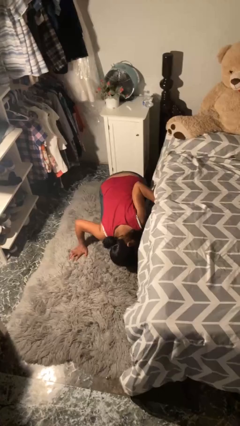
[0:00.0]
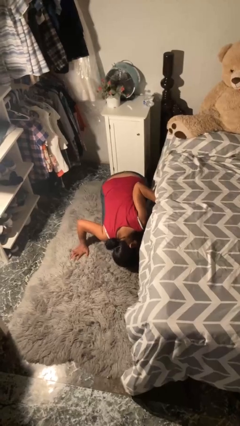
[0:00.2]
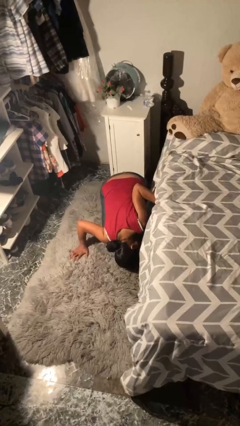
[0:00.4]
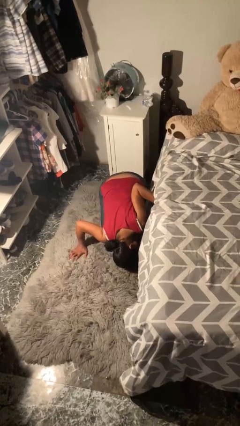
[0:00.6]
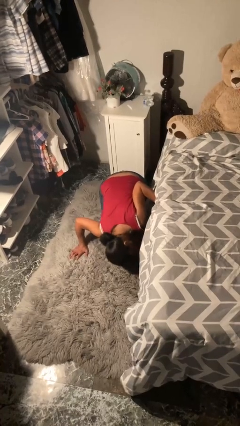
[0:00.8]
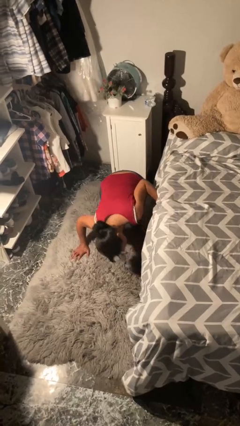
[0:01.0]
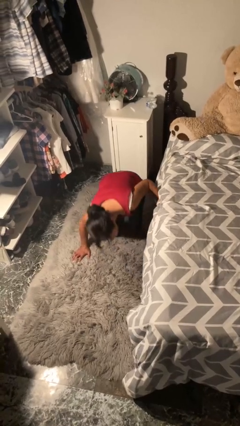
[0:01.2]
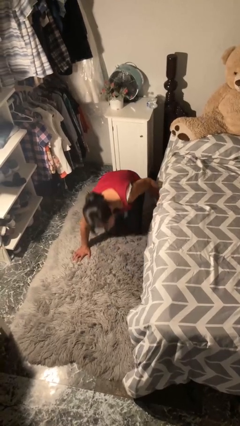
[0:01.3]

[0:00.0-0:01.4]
person searches under bed

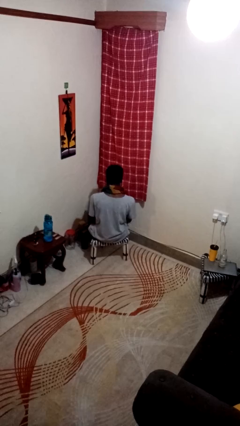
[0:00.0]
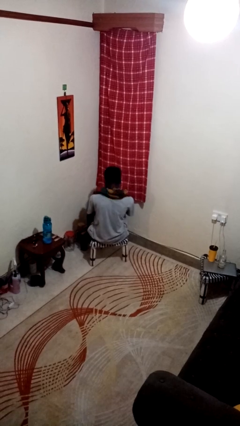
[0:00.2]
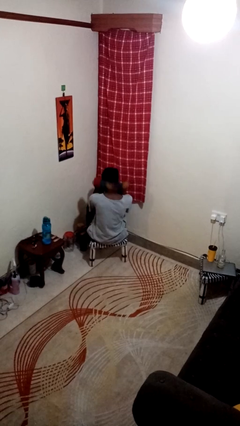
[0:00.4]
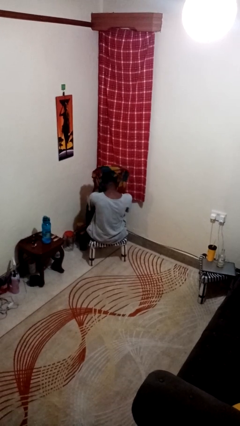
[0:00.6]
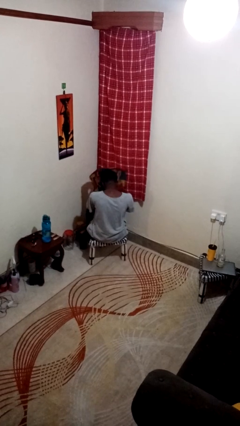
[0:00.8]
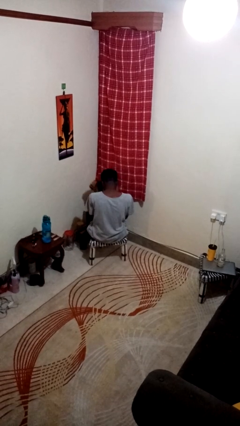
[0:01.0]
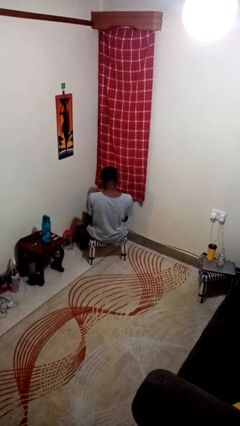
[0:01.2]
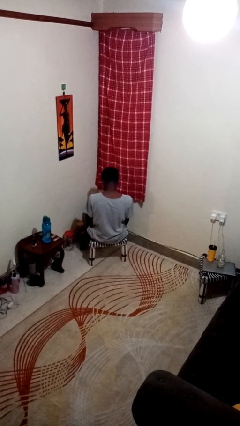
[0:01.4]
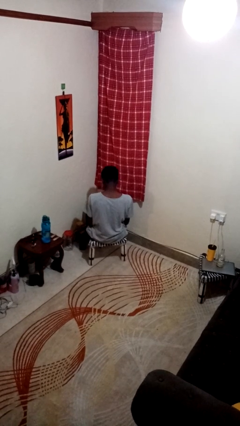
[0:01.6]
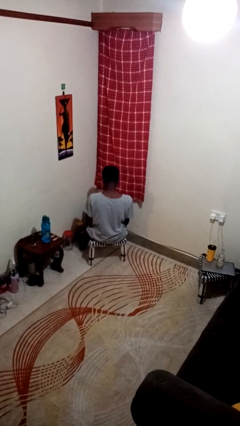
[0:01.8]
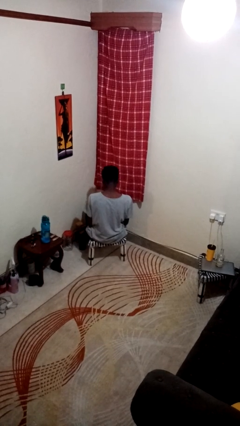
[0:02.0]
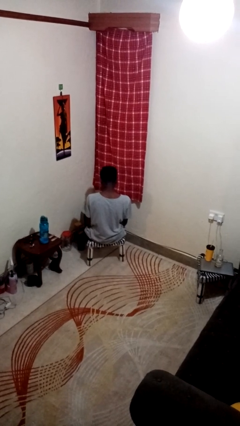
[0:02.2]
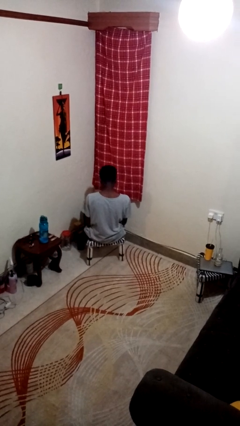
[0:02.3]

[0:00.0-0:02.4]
person takes off scarf

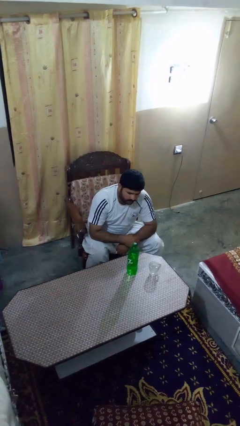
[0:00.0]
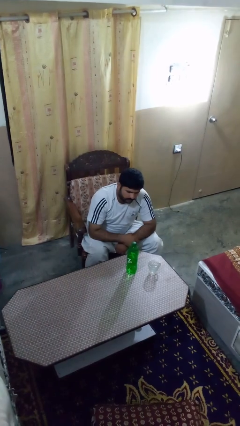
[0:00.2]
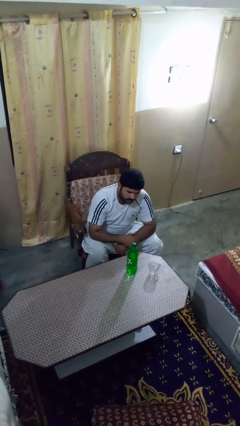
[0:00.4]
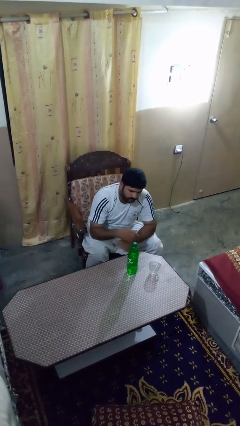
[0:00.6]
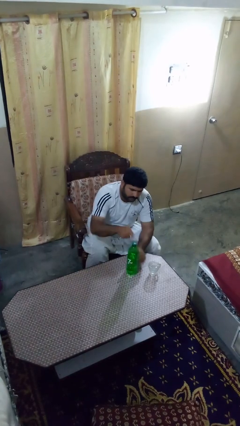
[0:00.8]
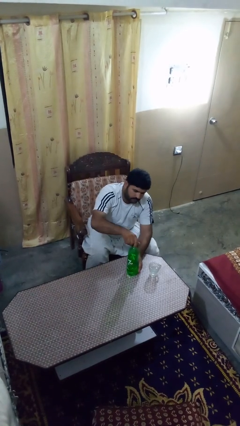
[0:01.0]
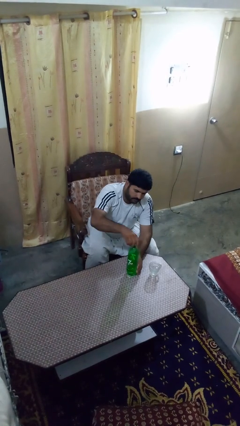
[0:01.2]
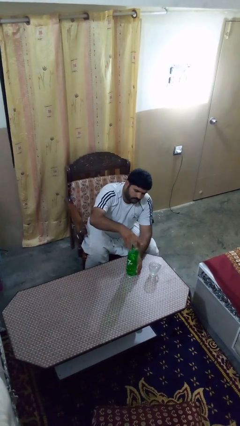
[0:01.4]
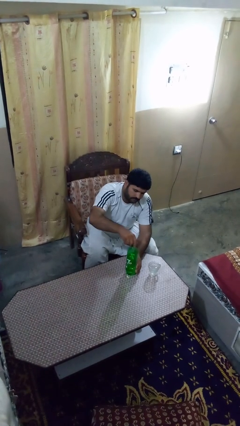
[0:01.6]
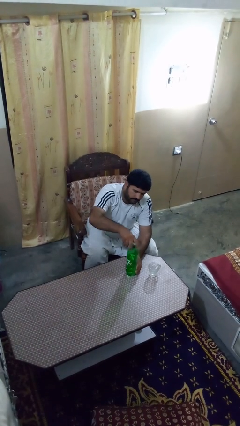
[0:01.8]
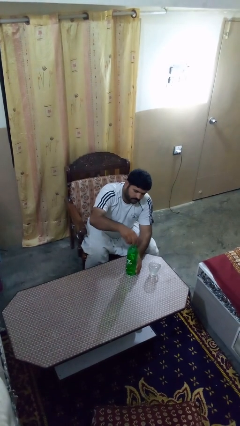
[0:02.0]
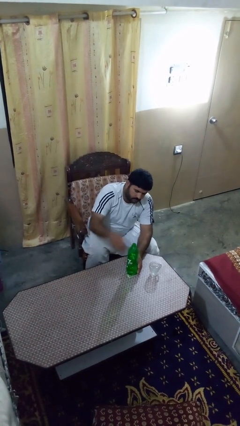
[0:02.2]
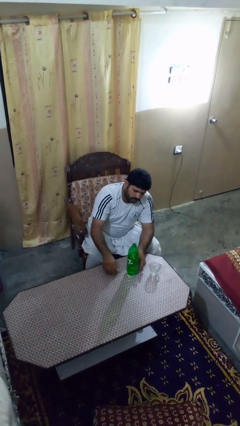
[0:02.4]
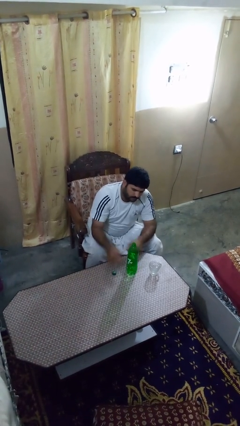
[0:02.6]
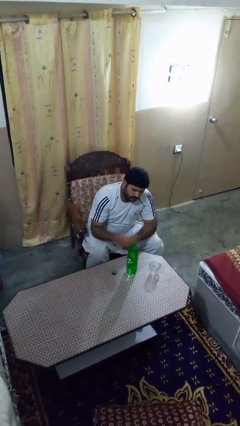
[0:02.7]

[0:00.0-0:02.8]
person unscrews lid from bottle

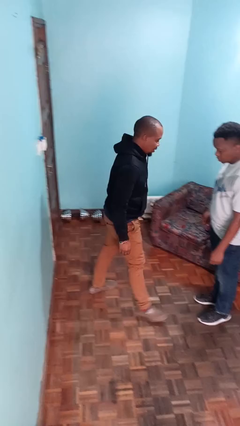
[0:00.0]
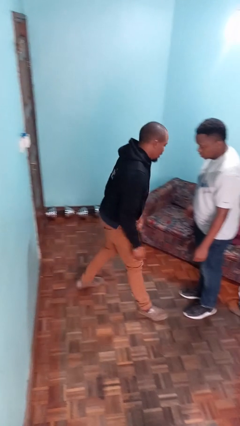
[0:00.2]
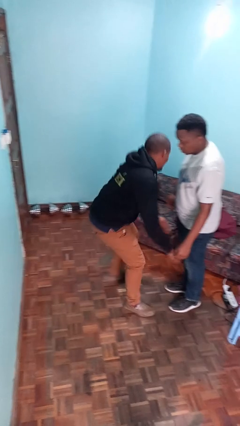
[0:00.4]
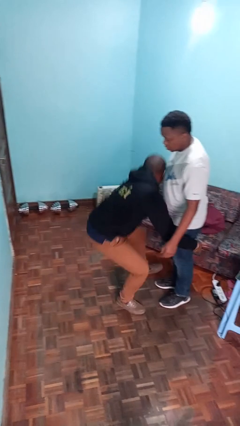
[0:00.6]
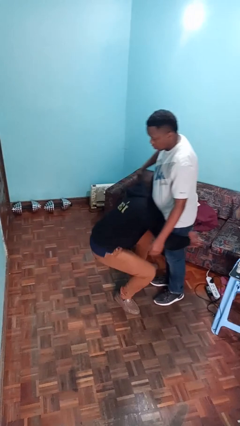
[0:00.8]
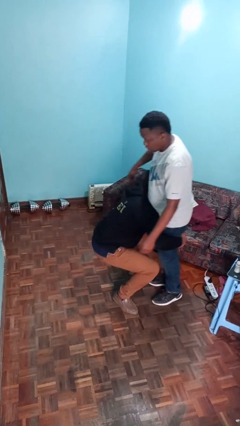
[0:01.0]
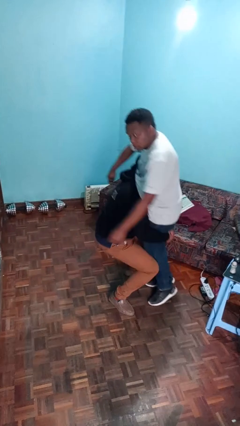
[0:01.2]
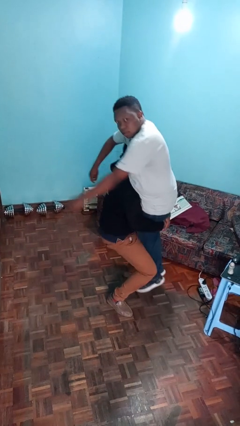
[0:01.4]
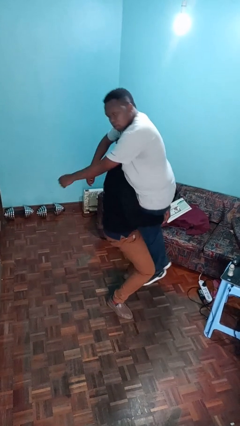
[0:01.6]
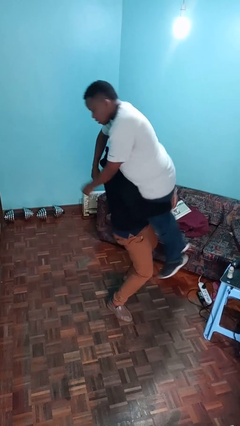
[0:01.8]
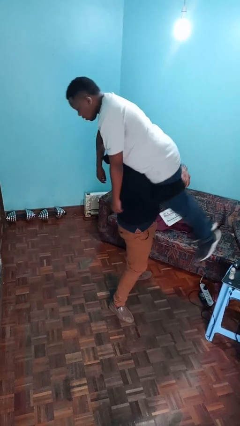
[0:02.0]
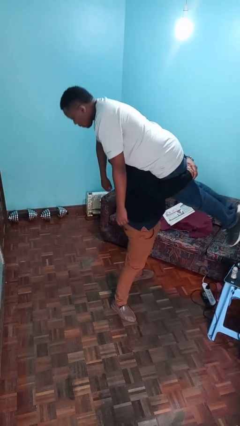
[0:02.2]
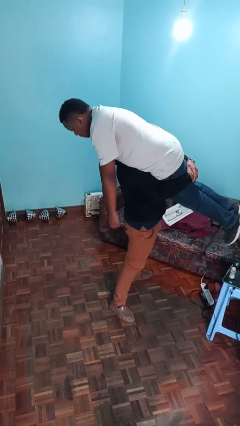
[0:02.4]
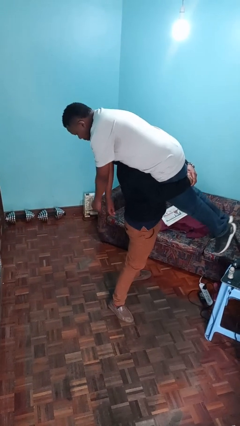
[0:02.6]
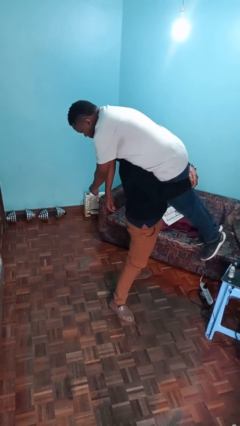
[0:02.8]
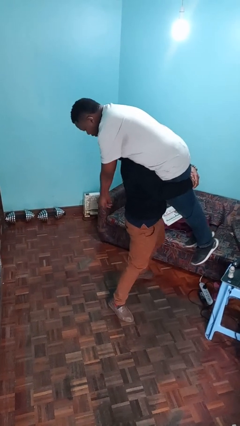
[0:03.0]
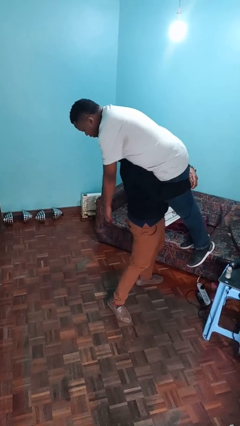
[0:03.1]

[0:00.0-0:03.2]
person carries person over shoulder

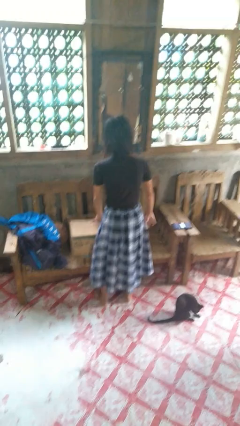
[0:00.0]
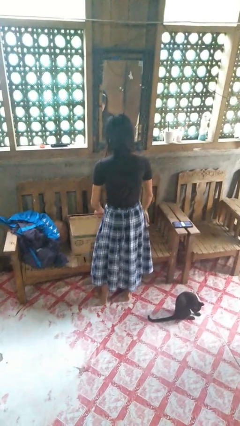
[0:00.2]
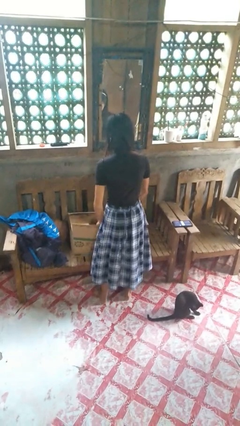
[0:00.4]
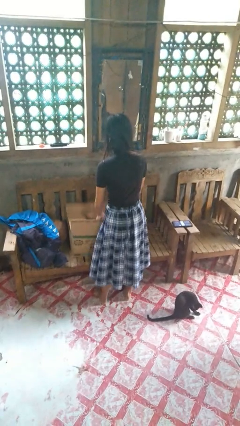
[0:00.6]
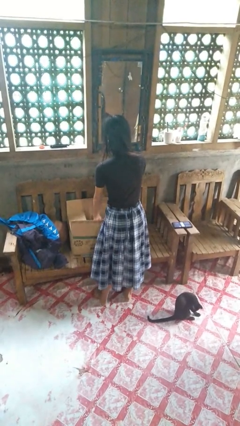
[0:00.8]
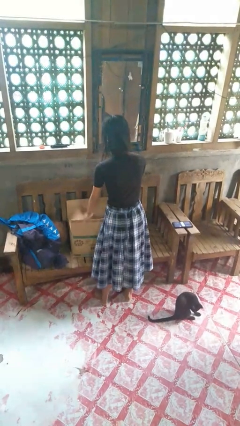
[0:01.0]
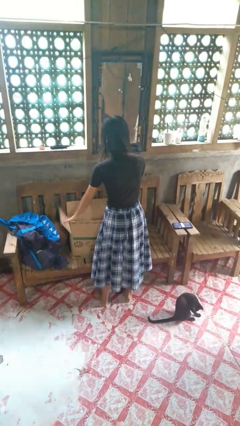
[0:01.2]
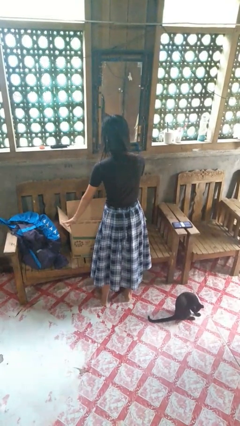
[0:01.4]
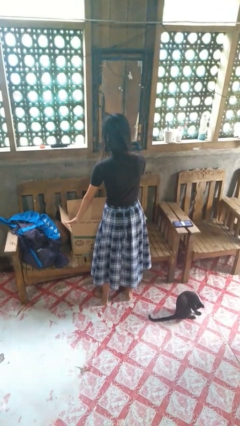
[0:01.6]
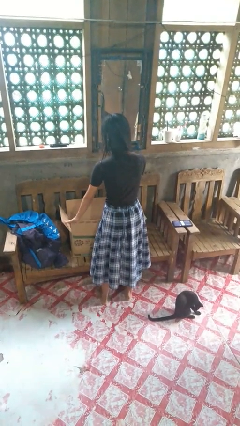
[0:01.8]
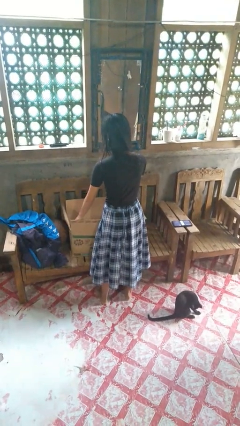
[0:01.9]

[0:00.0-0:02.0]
person opens box

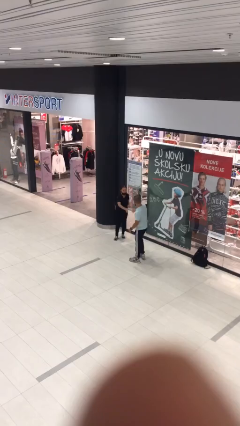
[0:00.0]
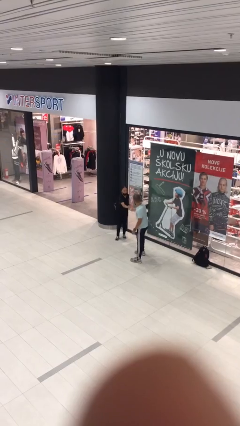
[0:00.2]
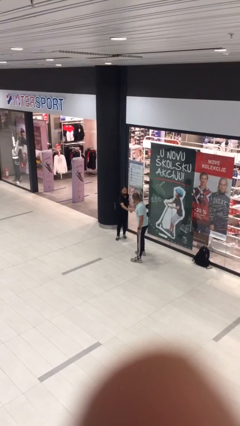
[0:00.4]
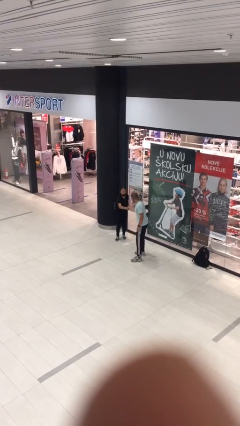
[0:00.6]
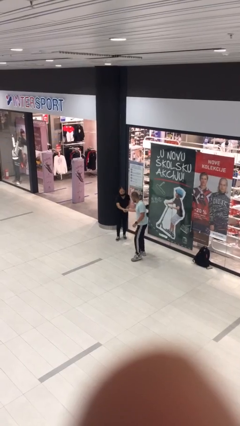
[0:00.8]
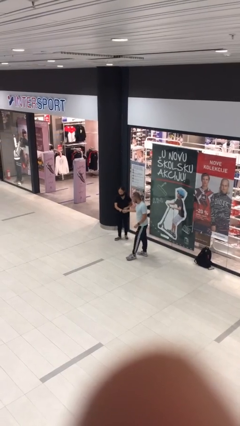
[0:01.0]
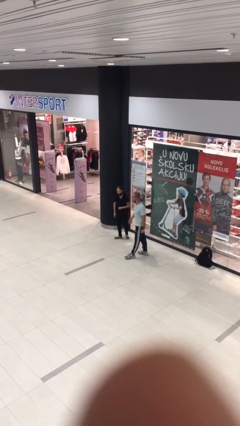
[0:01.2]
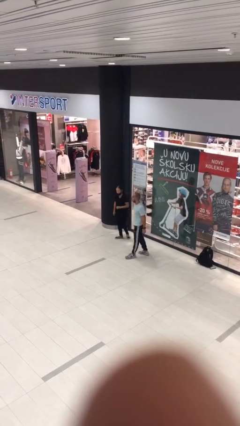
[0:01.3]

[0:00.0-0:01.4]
person shakes hand

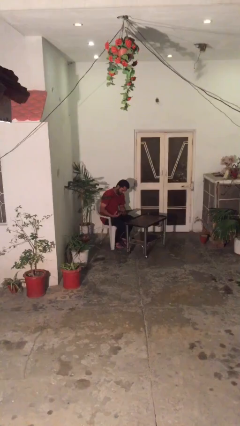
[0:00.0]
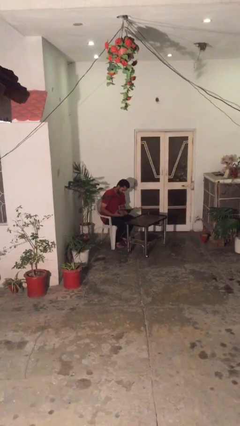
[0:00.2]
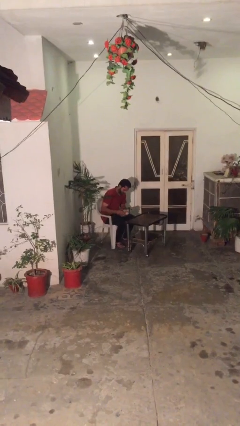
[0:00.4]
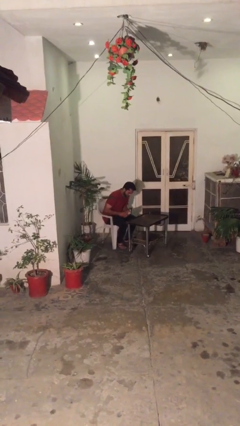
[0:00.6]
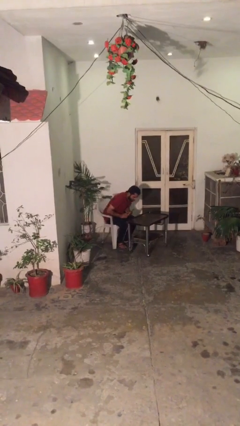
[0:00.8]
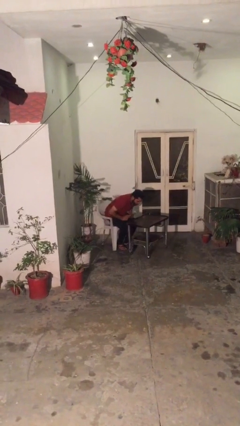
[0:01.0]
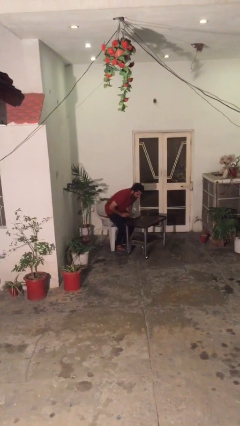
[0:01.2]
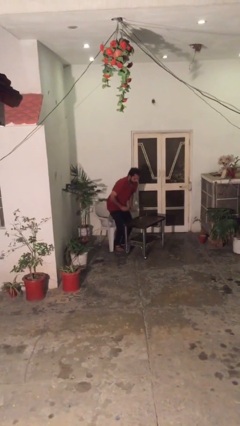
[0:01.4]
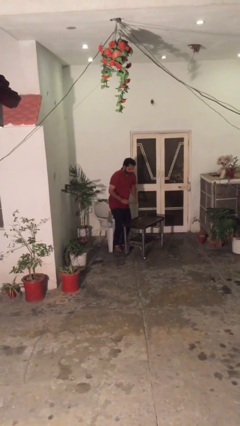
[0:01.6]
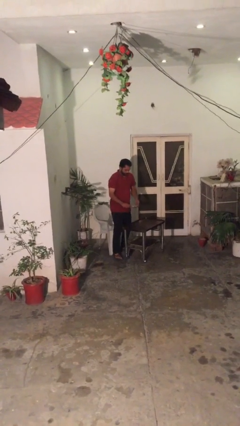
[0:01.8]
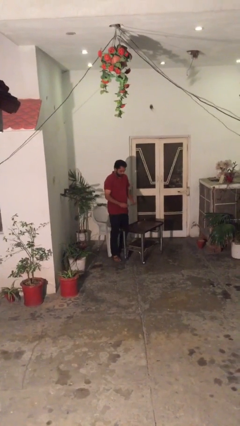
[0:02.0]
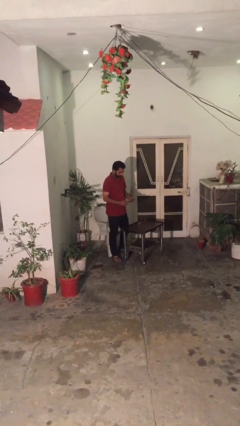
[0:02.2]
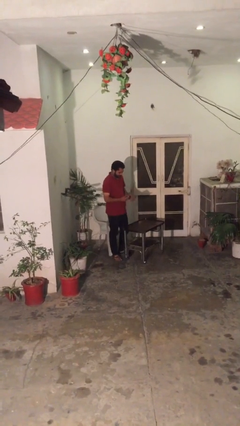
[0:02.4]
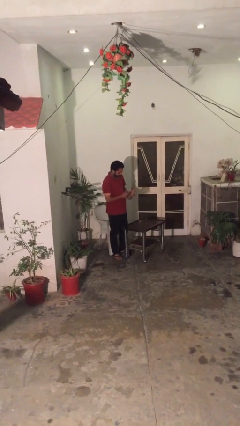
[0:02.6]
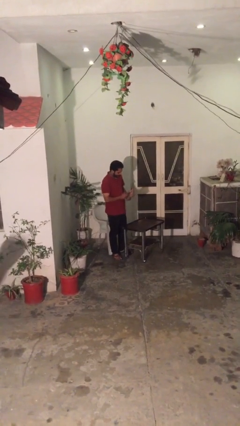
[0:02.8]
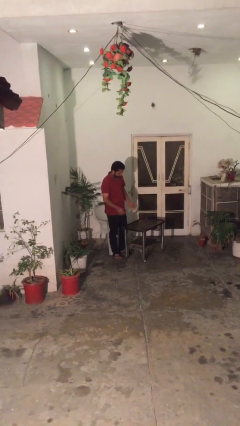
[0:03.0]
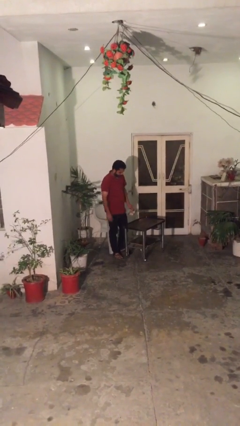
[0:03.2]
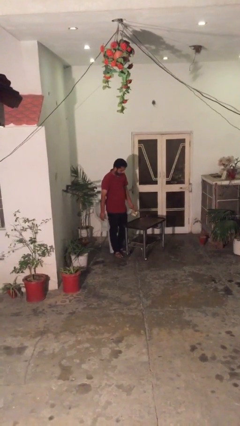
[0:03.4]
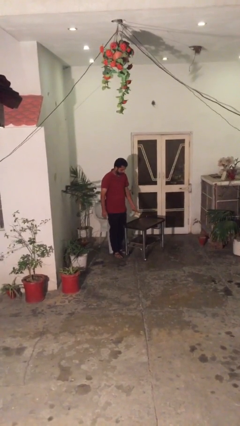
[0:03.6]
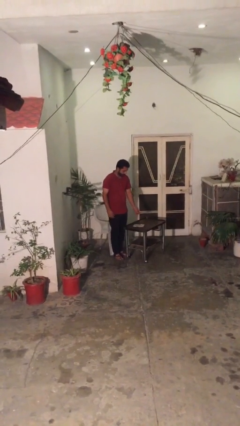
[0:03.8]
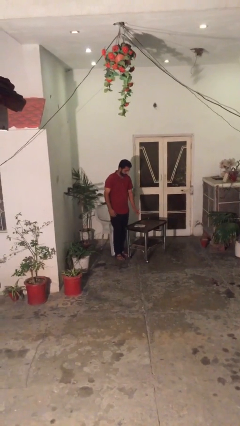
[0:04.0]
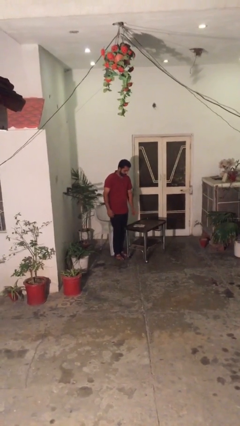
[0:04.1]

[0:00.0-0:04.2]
person stands up
